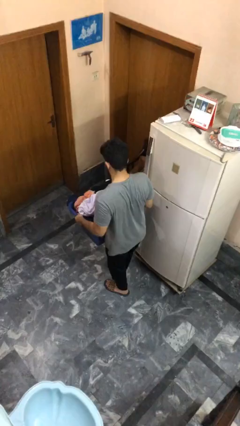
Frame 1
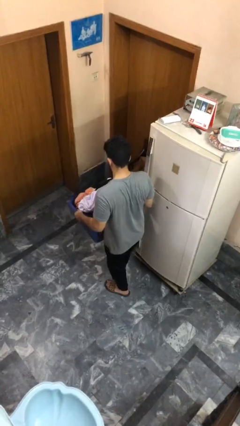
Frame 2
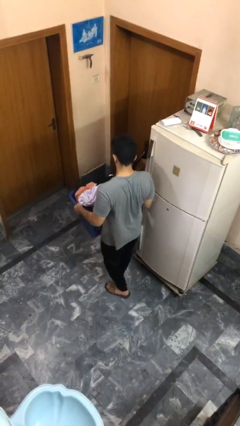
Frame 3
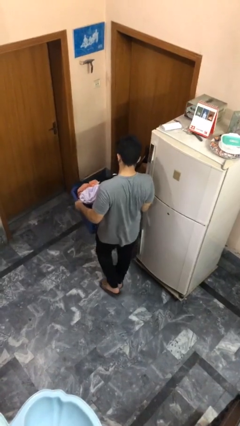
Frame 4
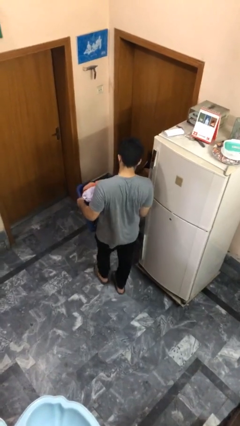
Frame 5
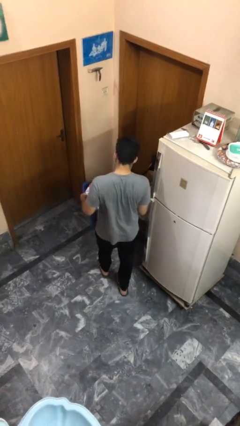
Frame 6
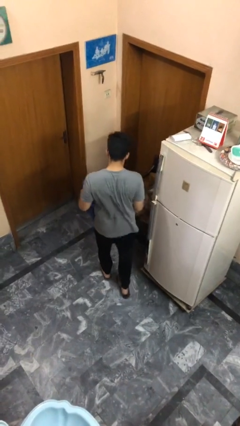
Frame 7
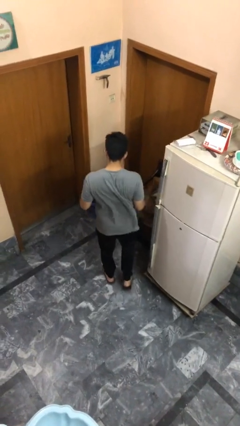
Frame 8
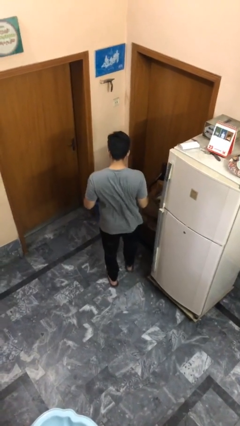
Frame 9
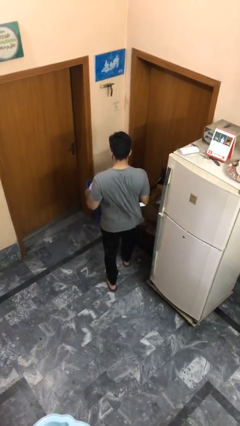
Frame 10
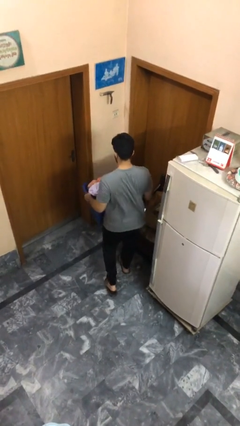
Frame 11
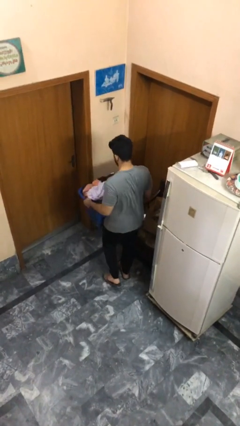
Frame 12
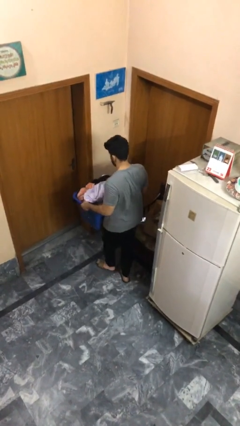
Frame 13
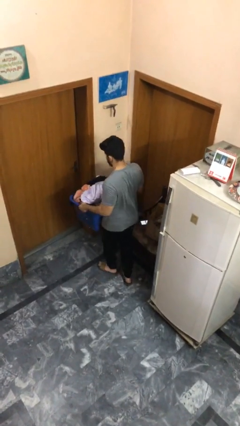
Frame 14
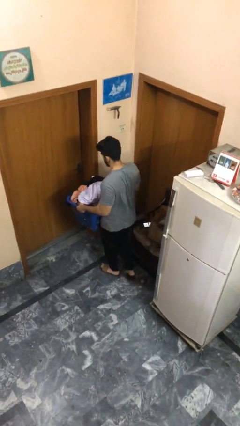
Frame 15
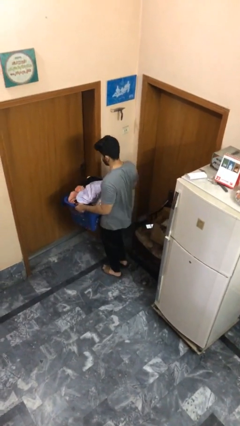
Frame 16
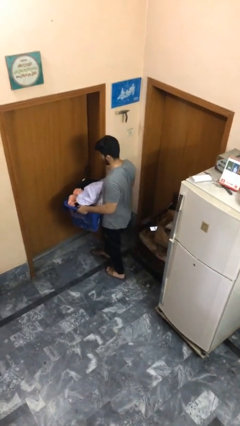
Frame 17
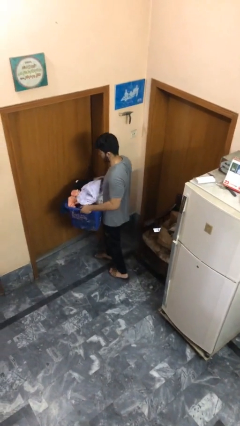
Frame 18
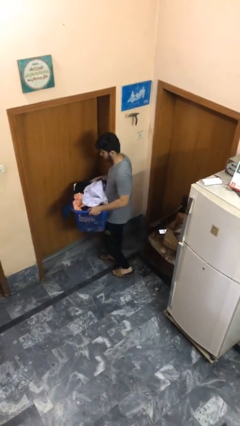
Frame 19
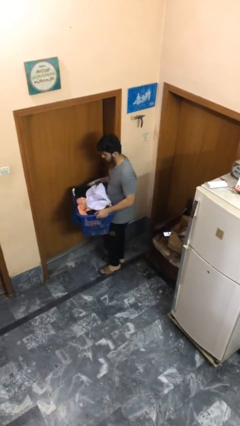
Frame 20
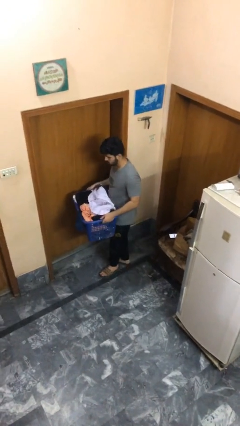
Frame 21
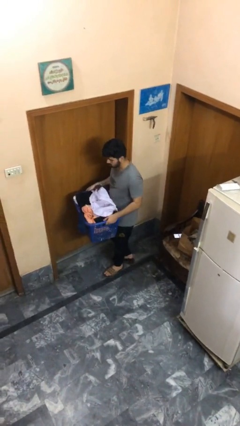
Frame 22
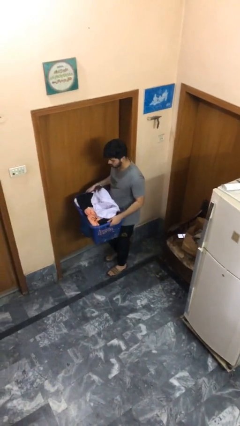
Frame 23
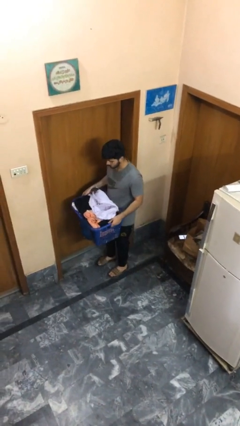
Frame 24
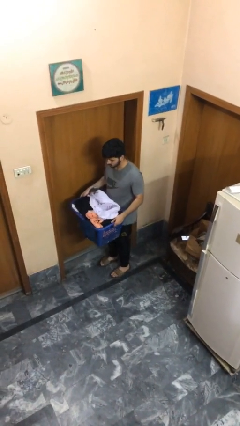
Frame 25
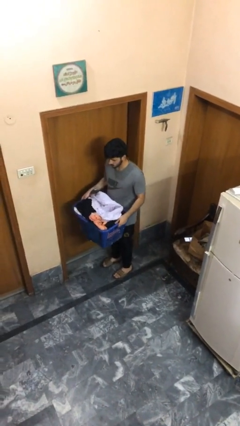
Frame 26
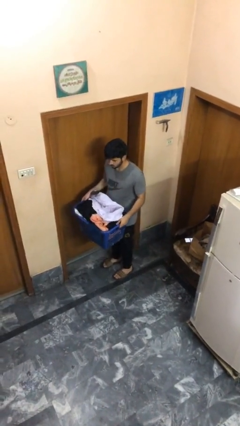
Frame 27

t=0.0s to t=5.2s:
person carries laundry basket

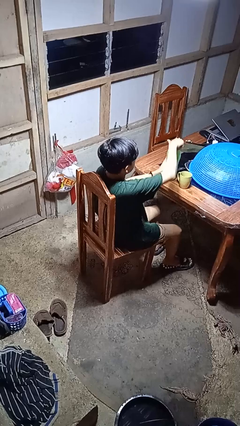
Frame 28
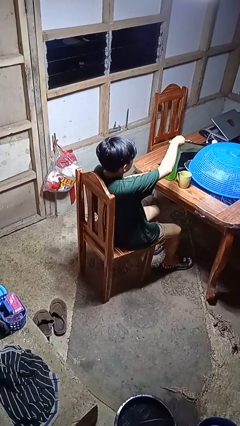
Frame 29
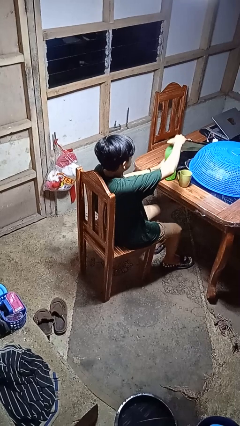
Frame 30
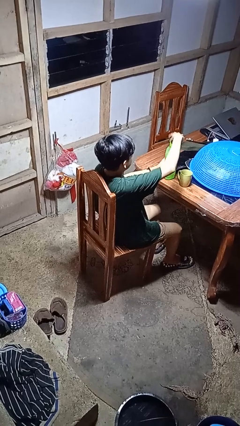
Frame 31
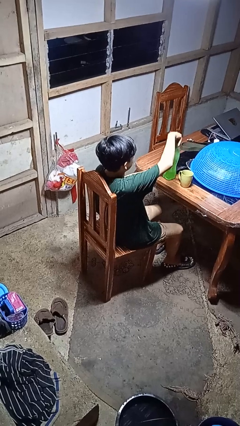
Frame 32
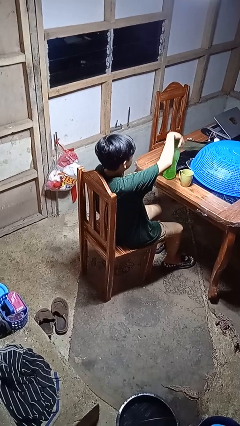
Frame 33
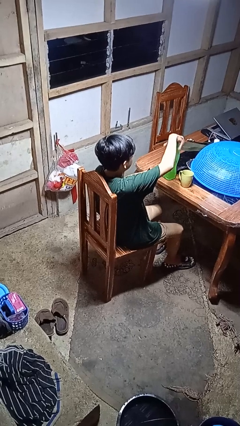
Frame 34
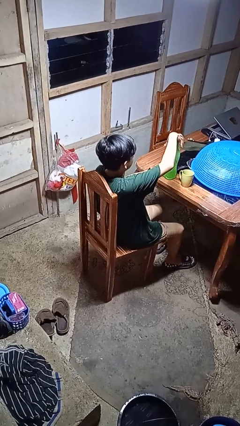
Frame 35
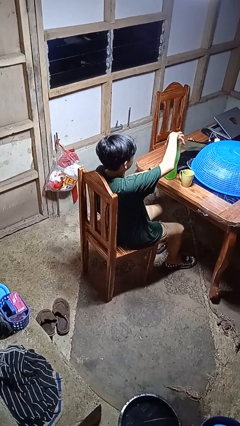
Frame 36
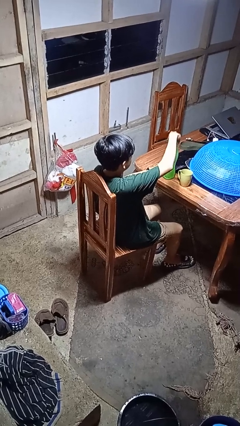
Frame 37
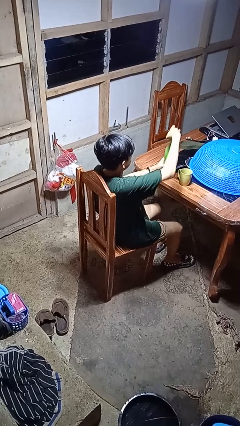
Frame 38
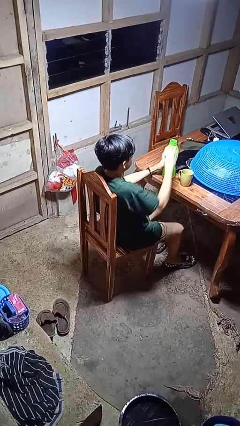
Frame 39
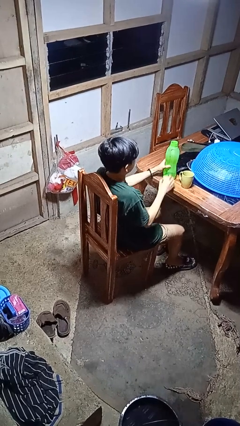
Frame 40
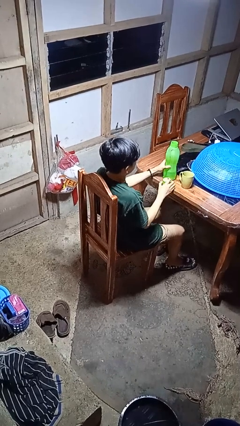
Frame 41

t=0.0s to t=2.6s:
person unscrews lid from bottle

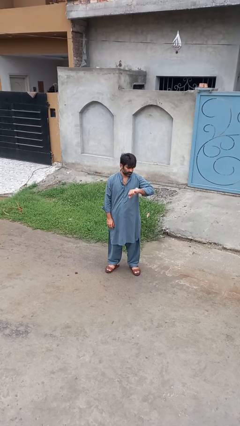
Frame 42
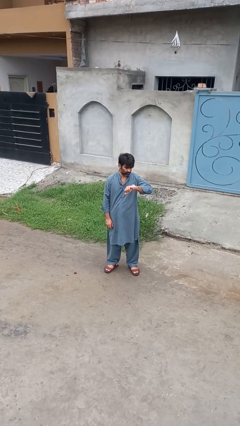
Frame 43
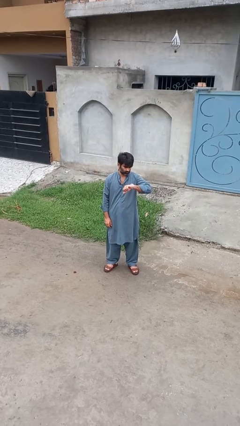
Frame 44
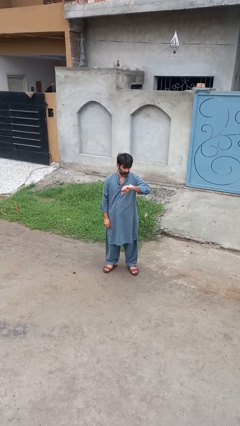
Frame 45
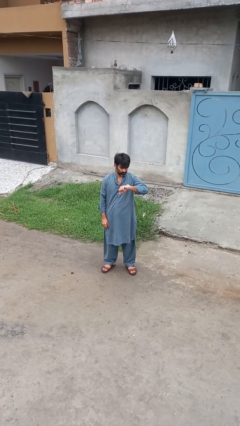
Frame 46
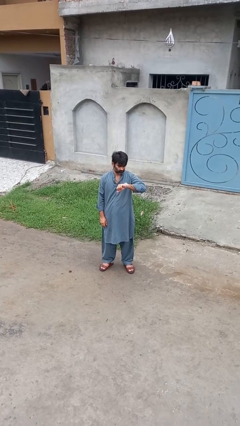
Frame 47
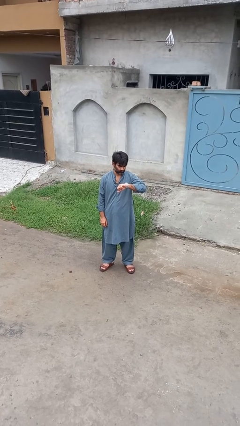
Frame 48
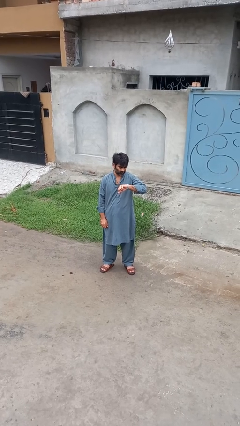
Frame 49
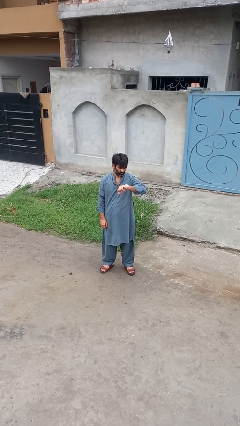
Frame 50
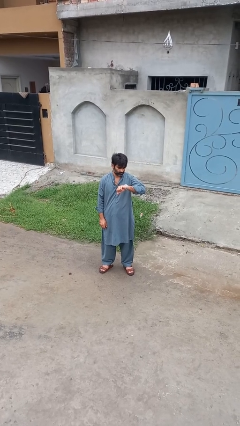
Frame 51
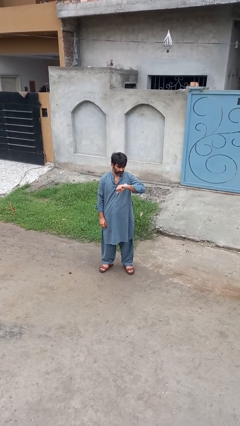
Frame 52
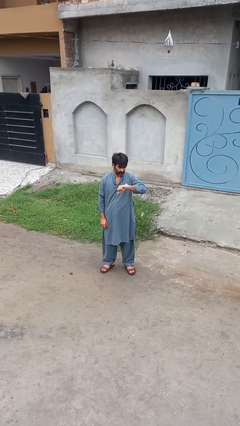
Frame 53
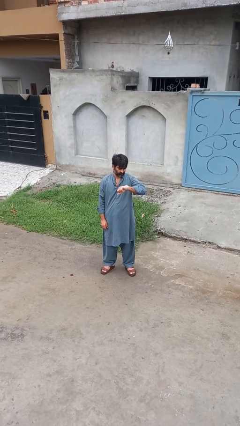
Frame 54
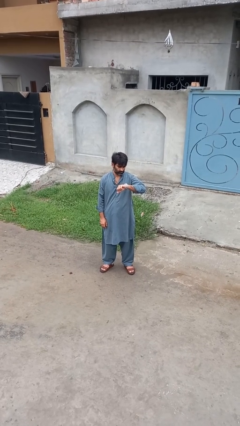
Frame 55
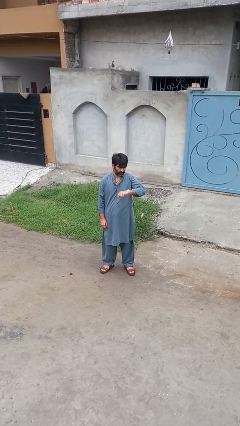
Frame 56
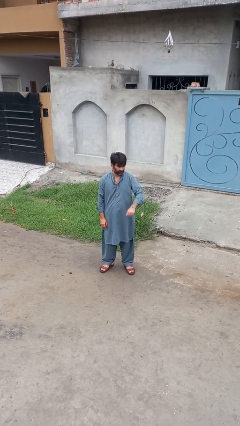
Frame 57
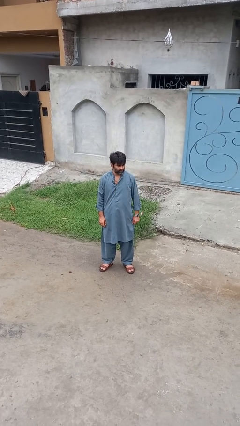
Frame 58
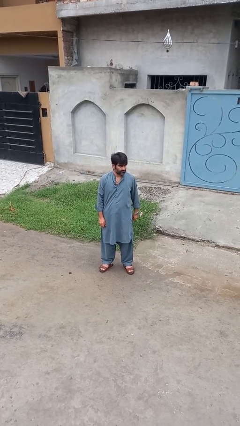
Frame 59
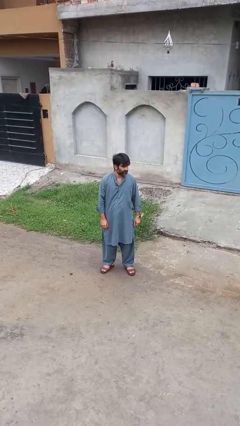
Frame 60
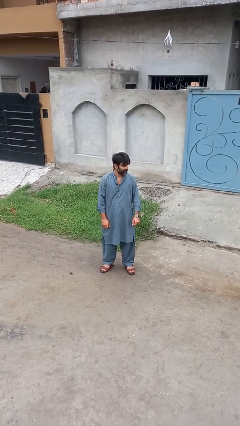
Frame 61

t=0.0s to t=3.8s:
person looks at wristwatch

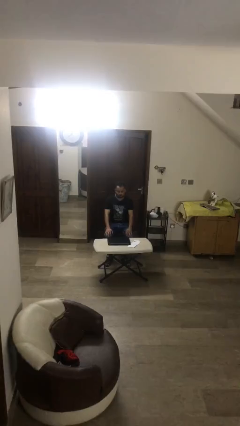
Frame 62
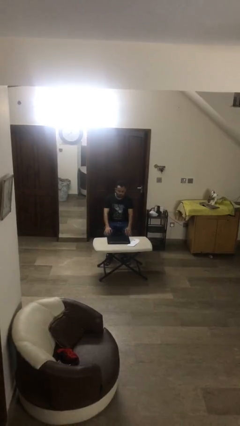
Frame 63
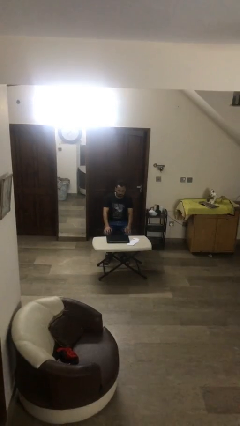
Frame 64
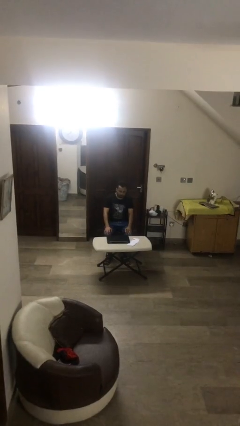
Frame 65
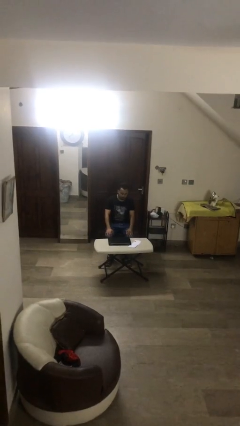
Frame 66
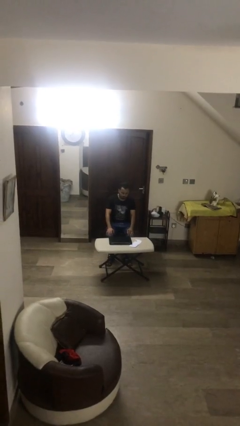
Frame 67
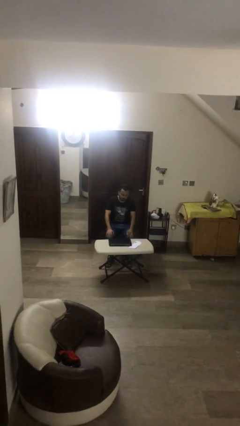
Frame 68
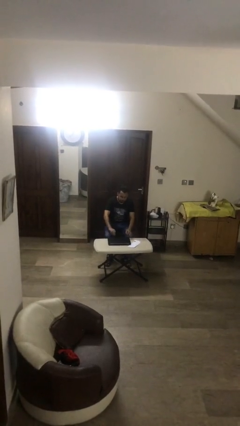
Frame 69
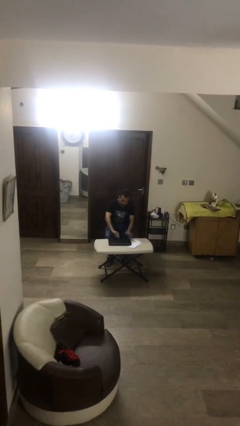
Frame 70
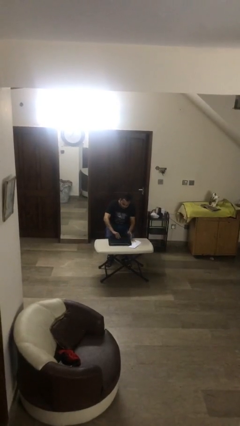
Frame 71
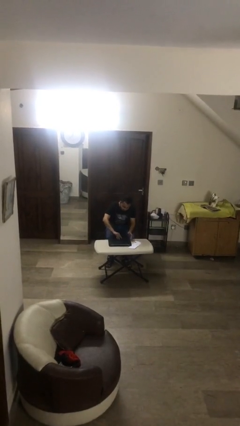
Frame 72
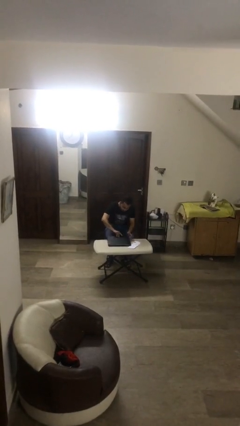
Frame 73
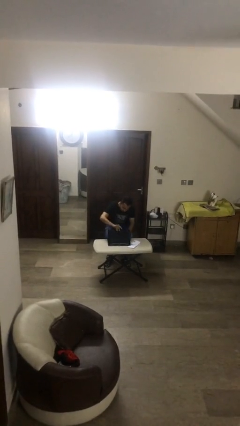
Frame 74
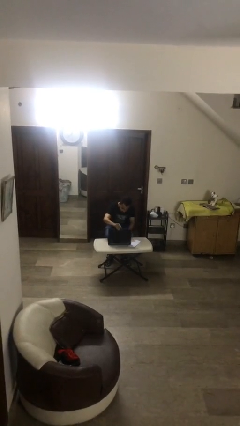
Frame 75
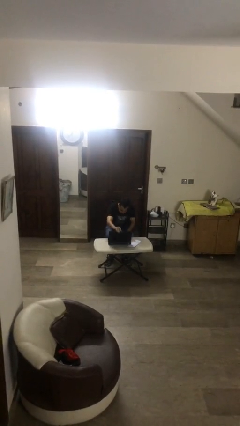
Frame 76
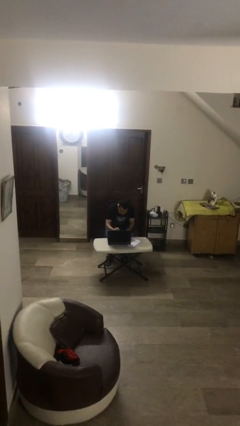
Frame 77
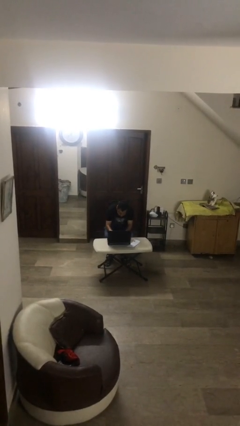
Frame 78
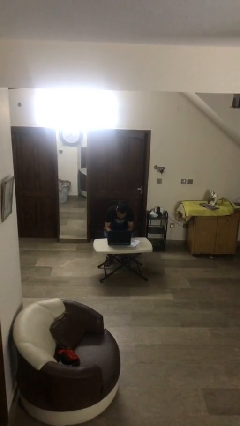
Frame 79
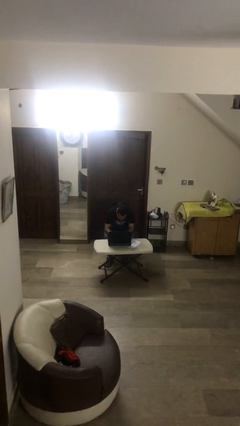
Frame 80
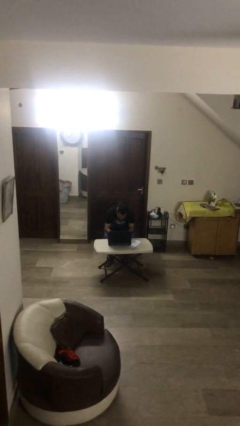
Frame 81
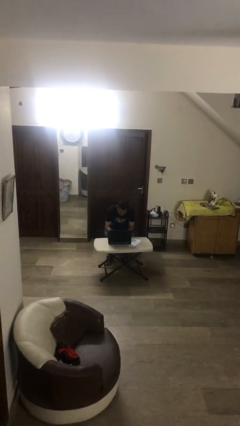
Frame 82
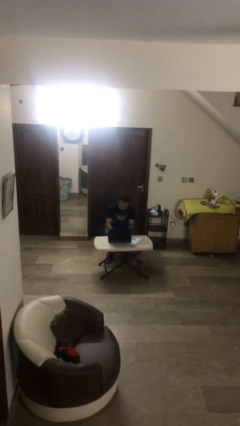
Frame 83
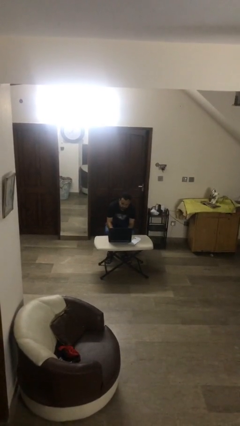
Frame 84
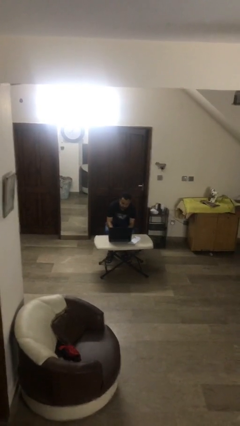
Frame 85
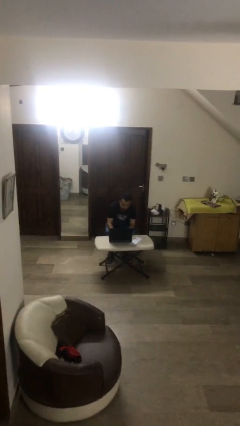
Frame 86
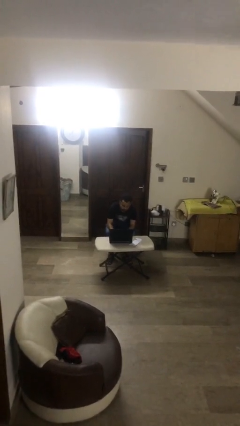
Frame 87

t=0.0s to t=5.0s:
person interacts with laptop

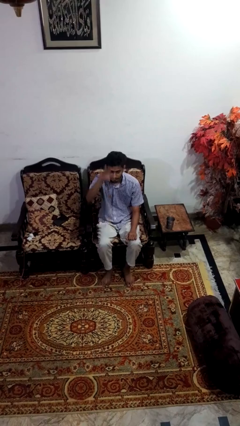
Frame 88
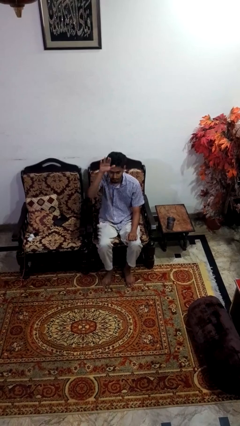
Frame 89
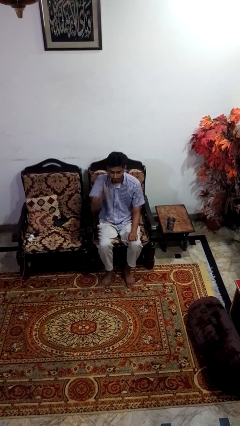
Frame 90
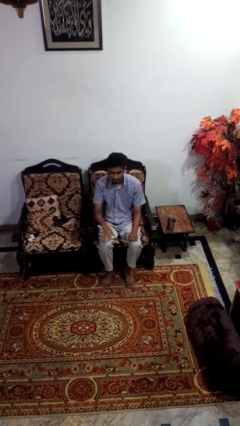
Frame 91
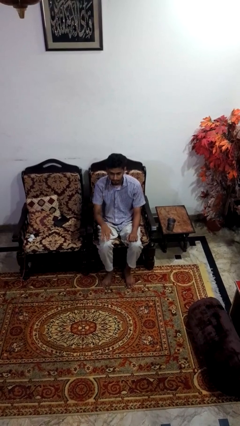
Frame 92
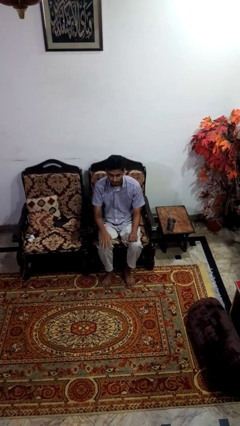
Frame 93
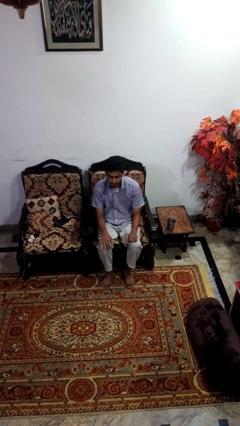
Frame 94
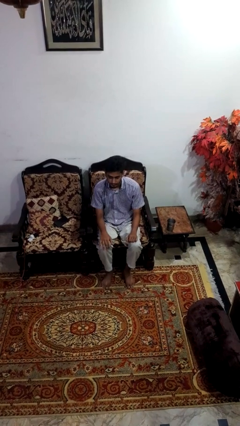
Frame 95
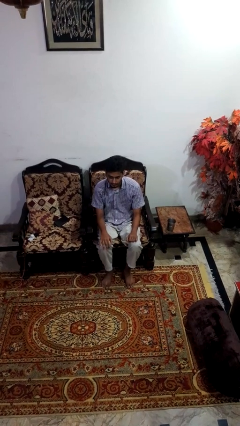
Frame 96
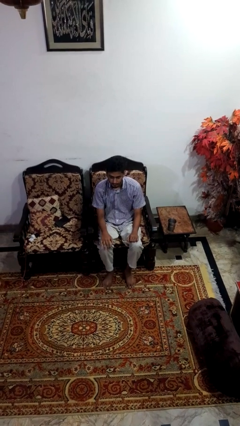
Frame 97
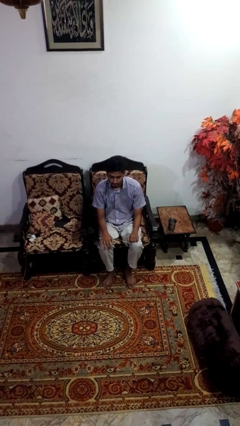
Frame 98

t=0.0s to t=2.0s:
person gestures swipe down
